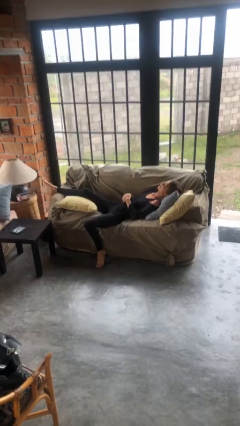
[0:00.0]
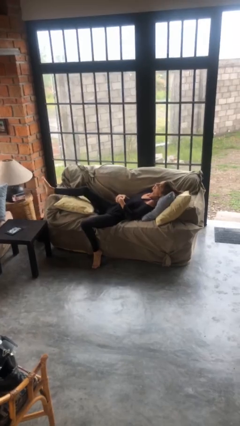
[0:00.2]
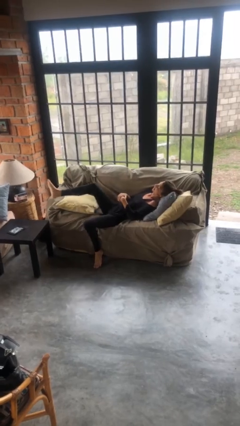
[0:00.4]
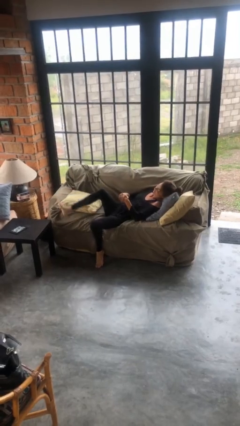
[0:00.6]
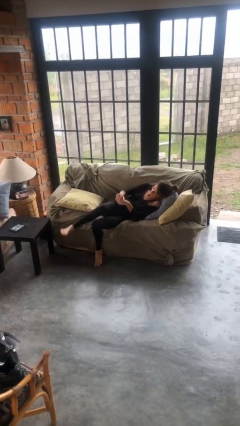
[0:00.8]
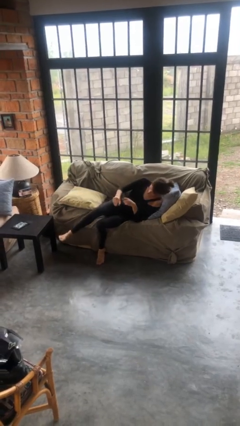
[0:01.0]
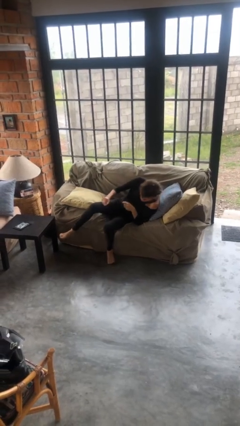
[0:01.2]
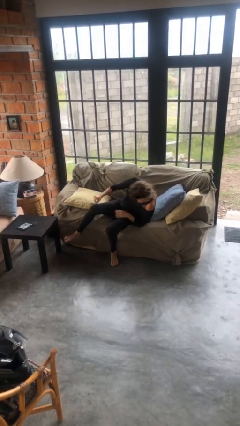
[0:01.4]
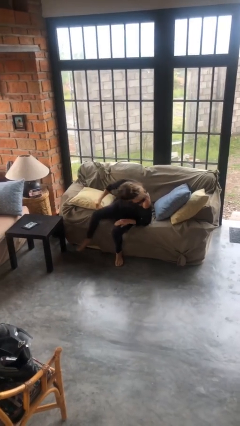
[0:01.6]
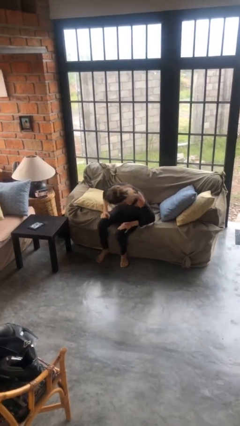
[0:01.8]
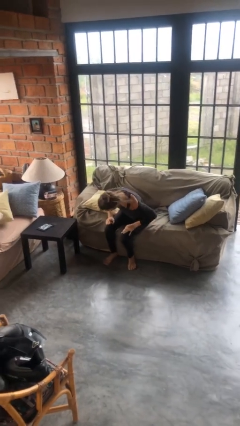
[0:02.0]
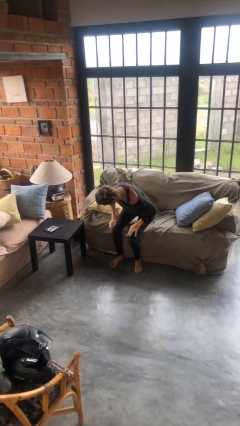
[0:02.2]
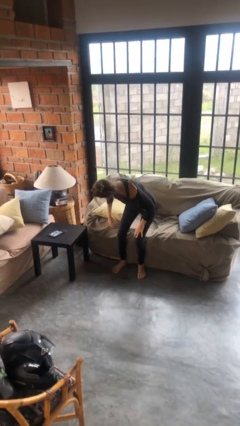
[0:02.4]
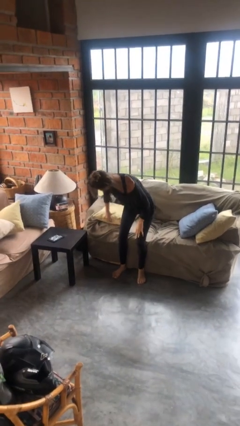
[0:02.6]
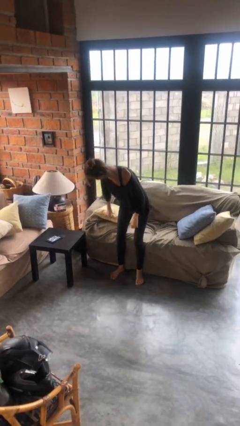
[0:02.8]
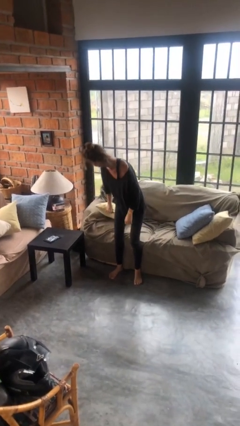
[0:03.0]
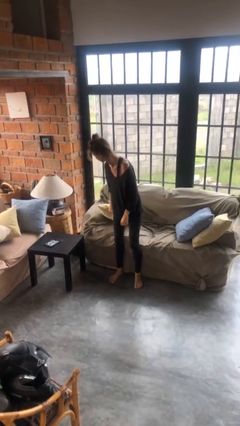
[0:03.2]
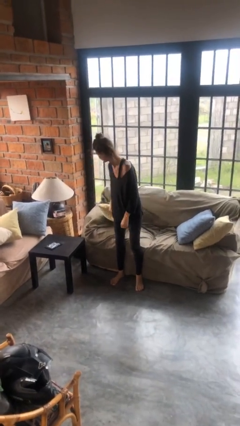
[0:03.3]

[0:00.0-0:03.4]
person stands up

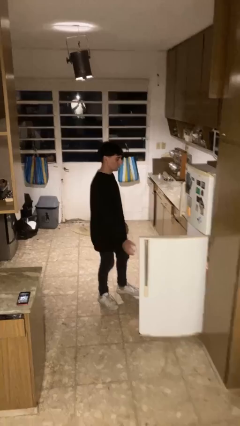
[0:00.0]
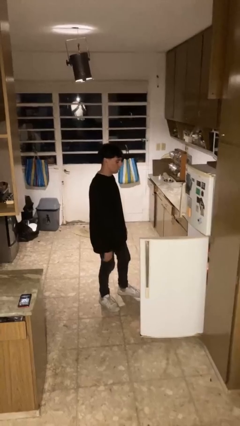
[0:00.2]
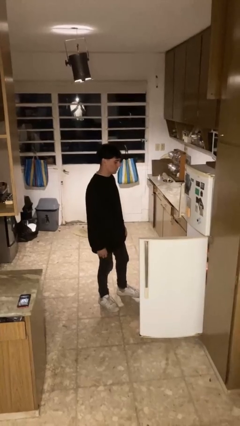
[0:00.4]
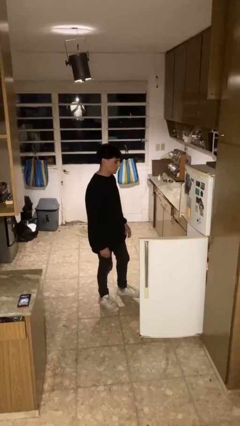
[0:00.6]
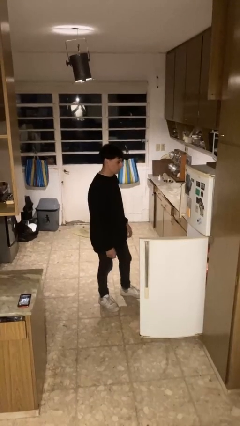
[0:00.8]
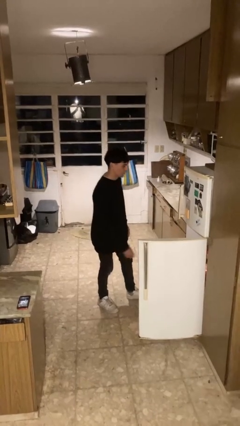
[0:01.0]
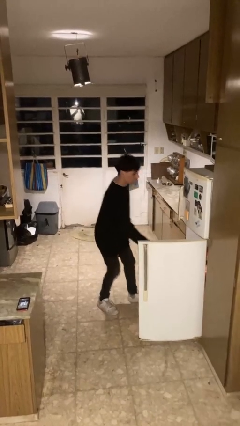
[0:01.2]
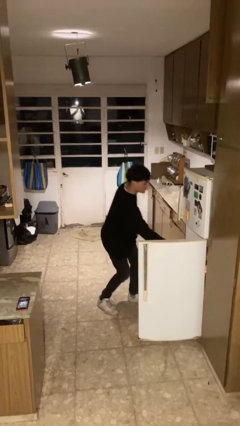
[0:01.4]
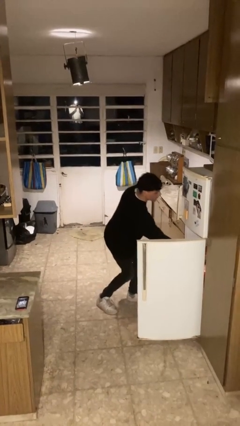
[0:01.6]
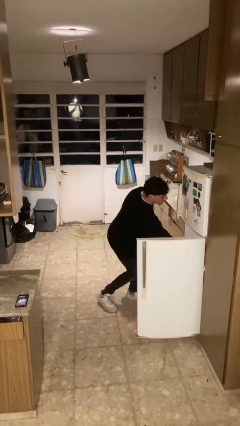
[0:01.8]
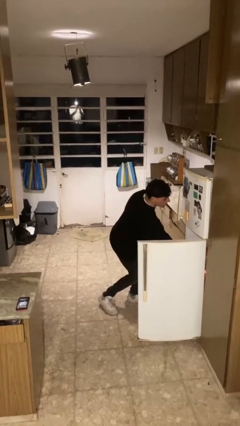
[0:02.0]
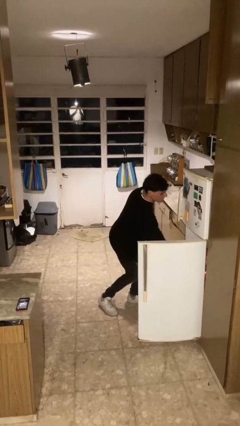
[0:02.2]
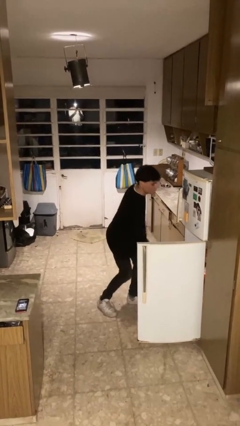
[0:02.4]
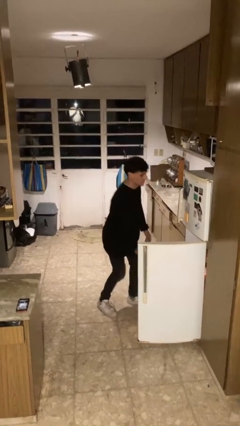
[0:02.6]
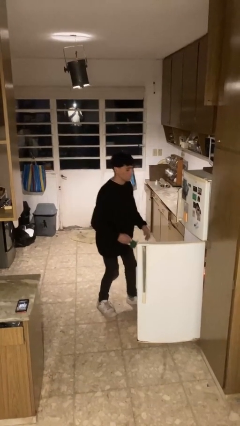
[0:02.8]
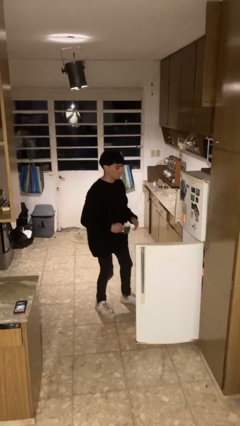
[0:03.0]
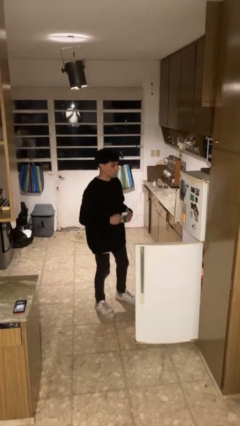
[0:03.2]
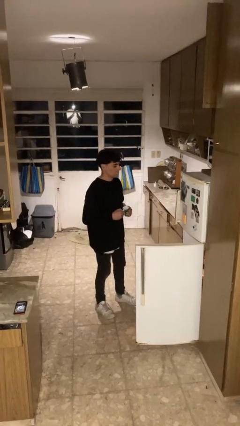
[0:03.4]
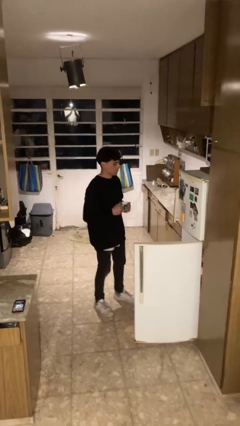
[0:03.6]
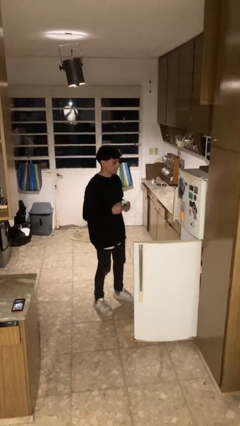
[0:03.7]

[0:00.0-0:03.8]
person takes object from refrigerator

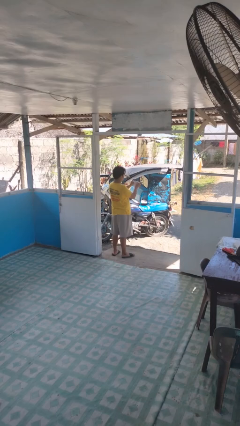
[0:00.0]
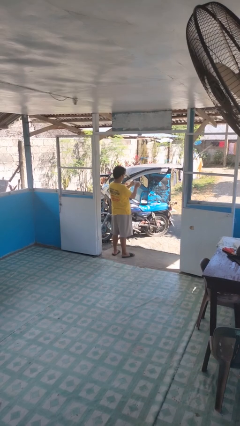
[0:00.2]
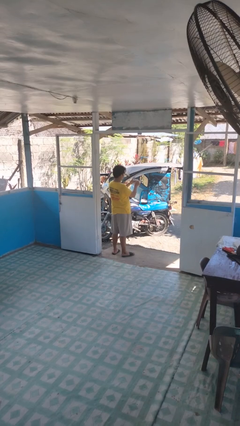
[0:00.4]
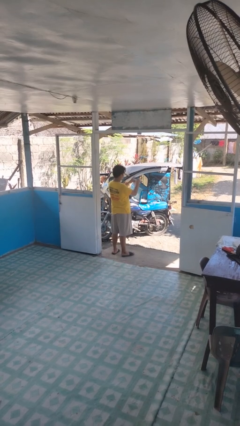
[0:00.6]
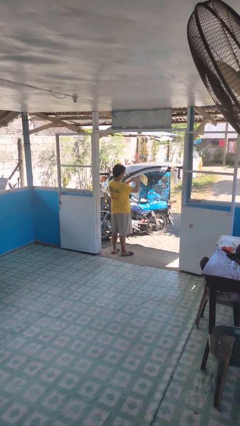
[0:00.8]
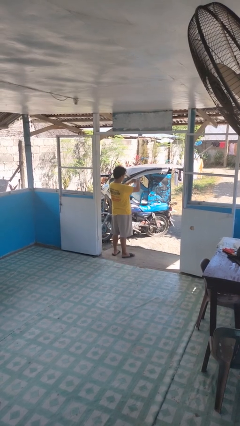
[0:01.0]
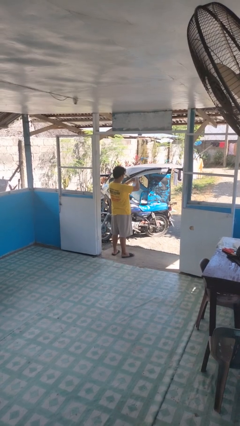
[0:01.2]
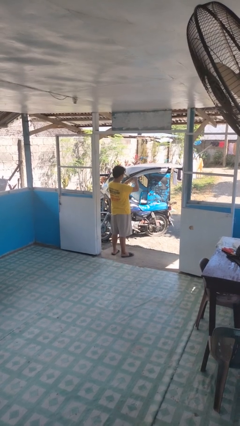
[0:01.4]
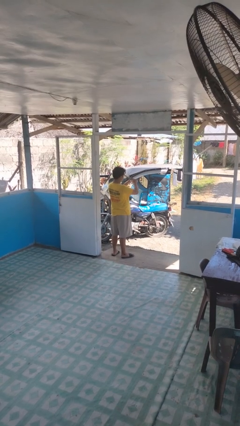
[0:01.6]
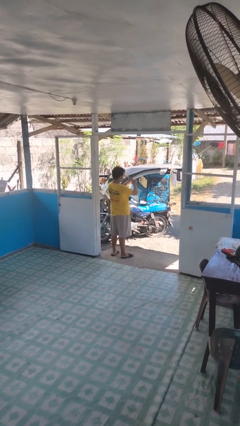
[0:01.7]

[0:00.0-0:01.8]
person tears paper

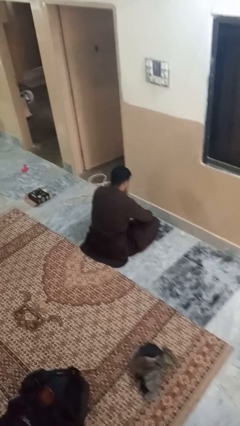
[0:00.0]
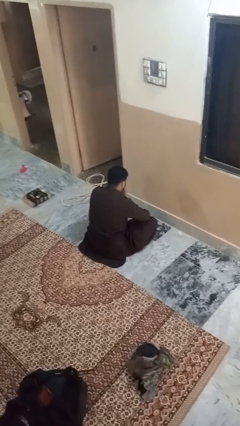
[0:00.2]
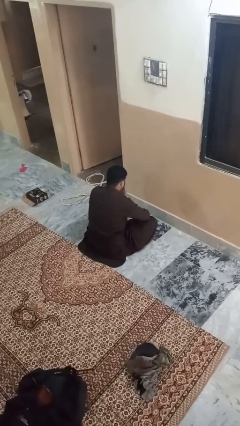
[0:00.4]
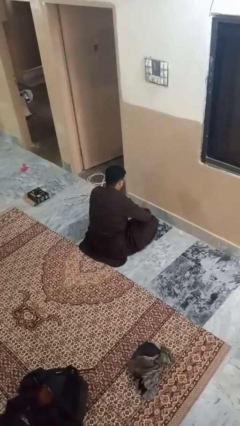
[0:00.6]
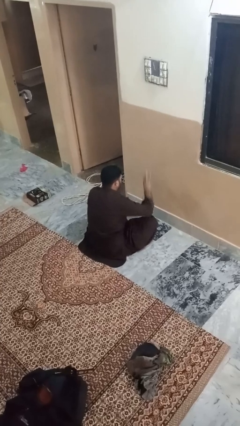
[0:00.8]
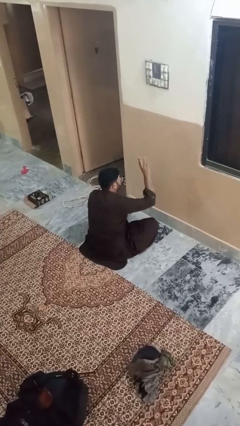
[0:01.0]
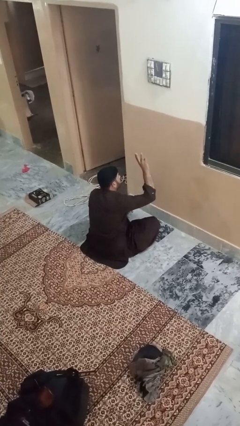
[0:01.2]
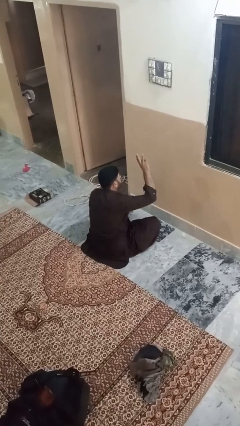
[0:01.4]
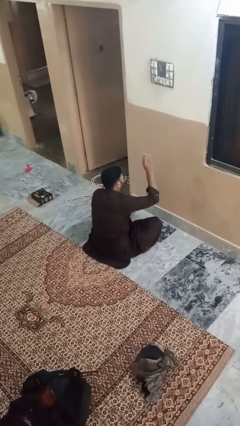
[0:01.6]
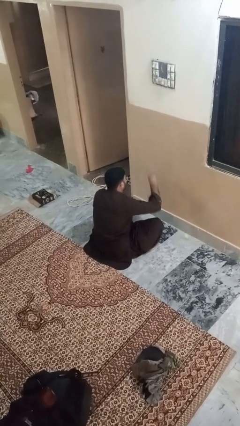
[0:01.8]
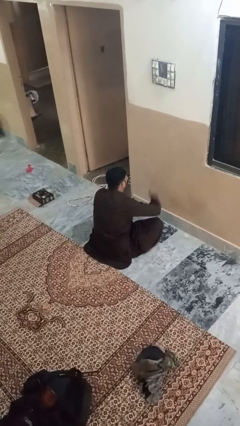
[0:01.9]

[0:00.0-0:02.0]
person gestures number three

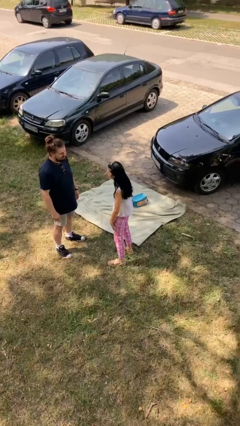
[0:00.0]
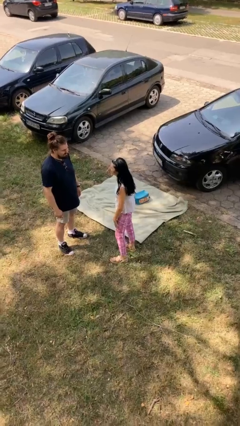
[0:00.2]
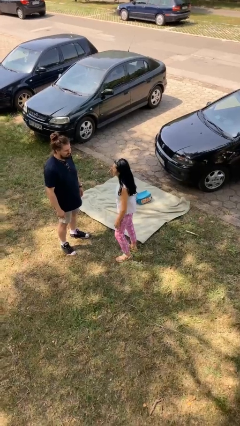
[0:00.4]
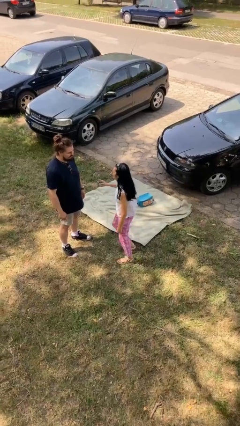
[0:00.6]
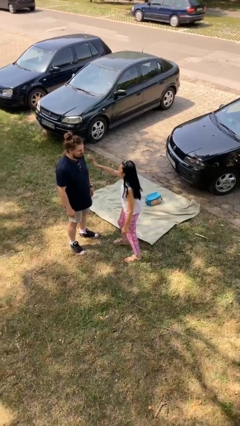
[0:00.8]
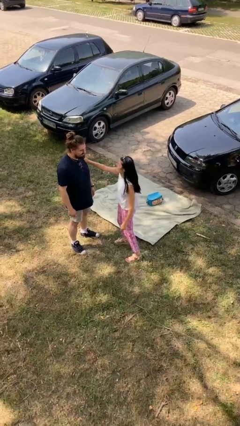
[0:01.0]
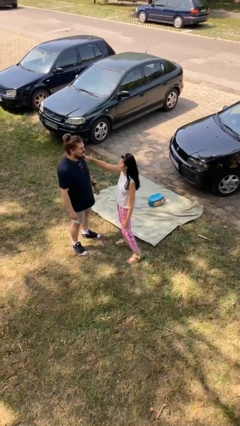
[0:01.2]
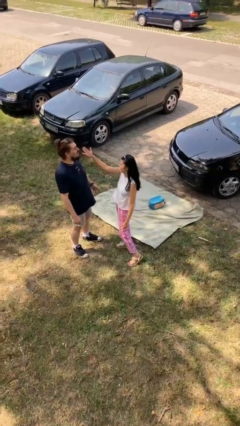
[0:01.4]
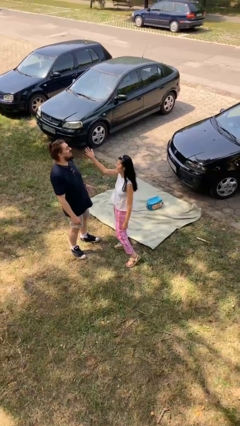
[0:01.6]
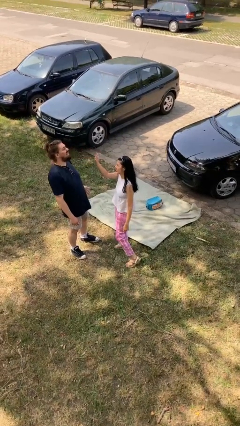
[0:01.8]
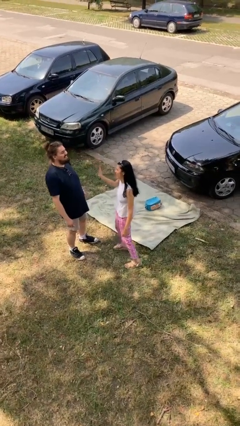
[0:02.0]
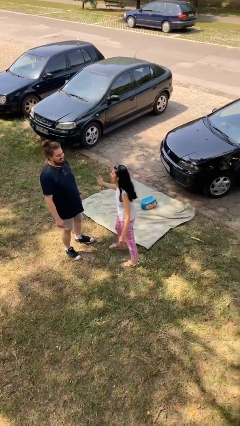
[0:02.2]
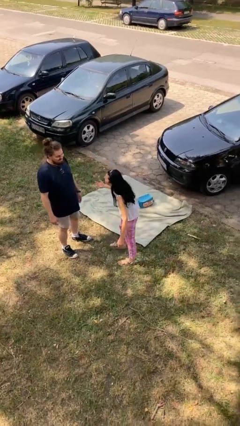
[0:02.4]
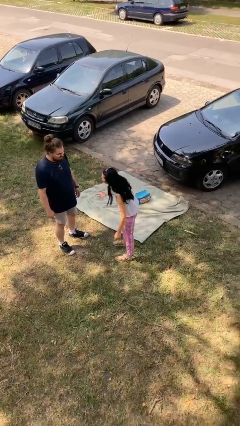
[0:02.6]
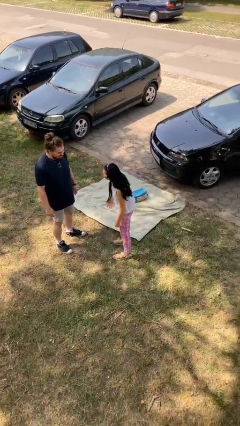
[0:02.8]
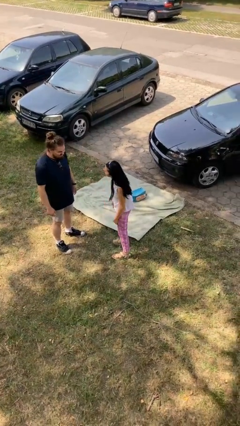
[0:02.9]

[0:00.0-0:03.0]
person shoves person

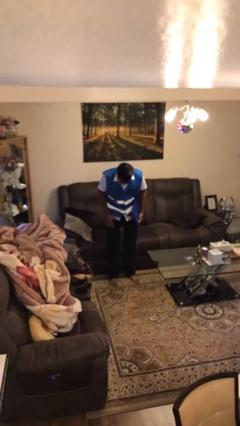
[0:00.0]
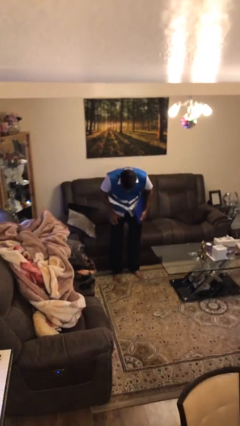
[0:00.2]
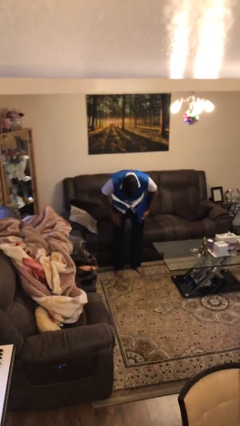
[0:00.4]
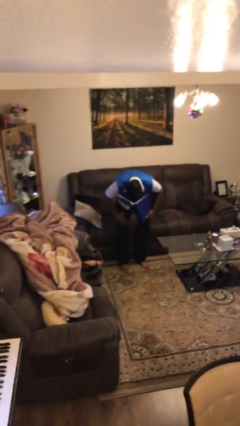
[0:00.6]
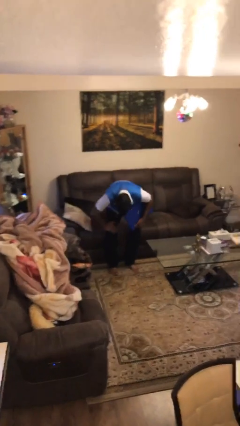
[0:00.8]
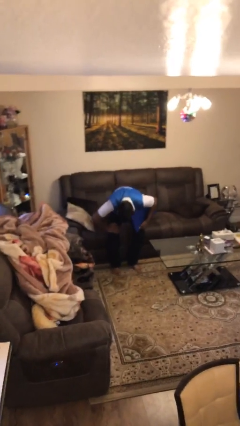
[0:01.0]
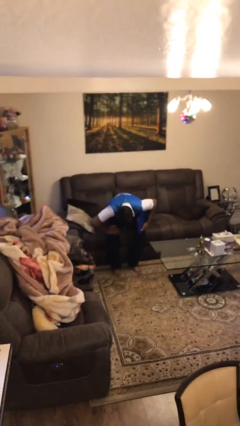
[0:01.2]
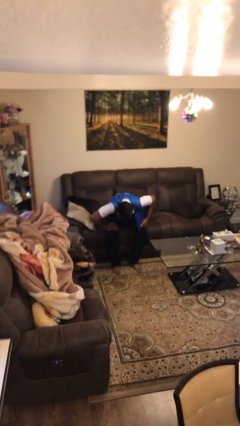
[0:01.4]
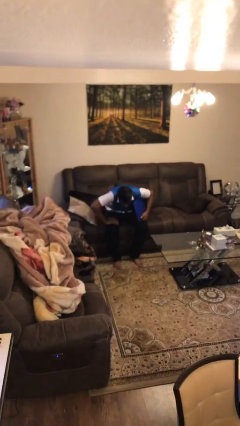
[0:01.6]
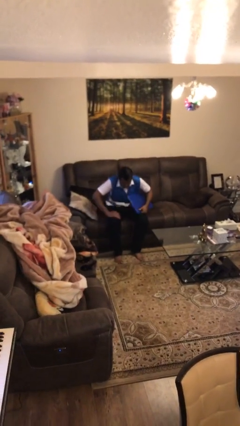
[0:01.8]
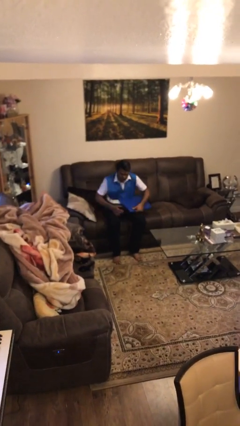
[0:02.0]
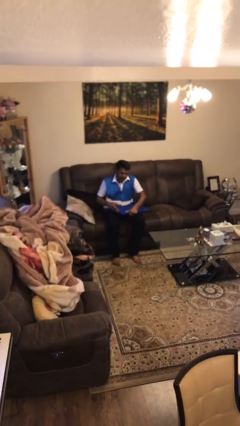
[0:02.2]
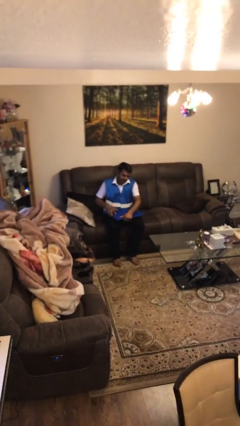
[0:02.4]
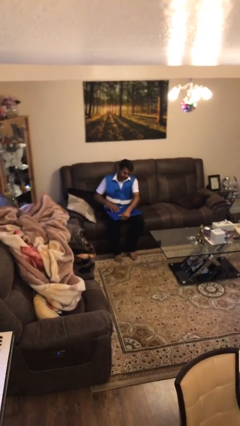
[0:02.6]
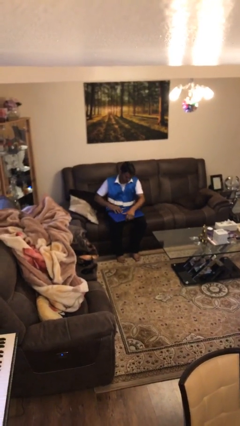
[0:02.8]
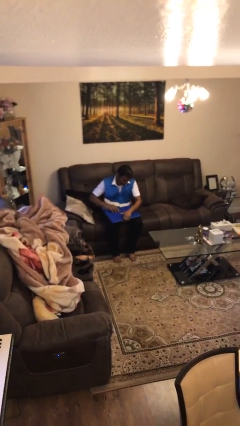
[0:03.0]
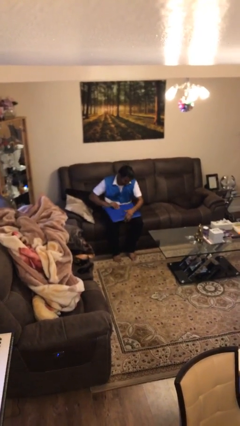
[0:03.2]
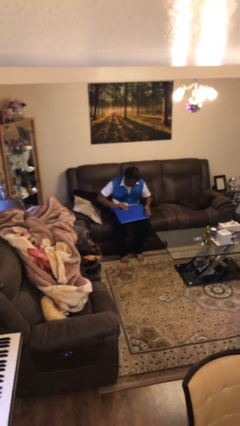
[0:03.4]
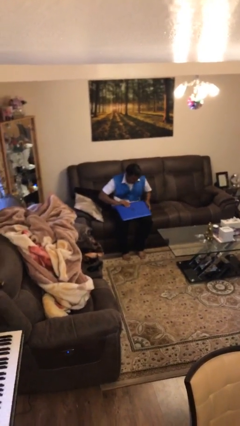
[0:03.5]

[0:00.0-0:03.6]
person sits down
